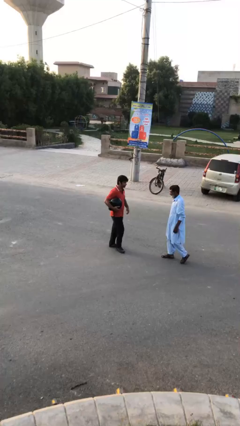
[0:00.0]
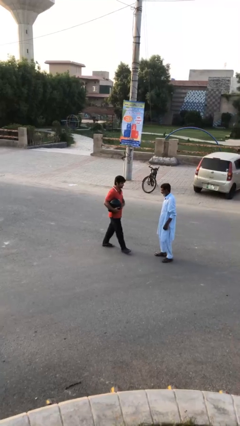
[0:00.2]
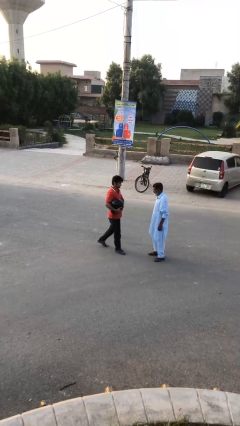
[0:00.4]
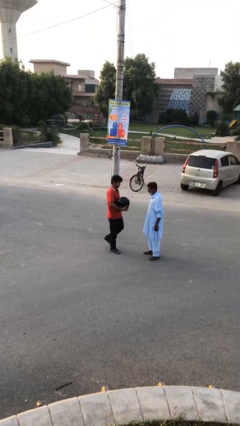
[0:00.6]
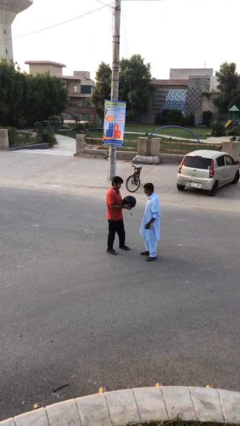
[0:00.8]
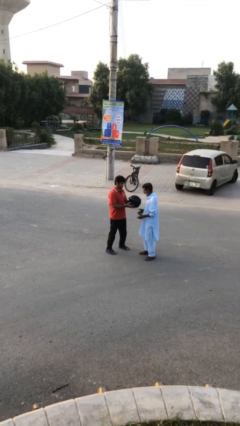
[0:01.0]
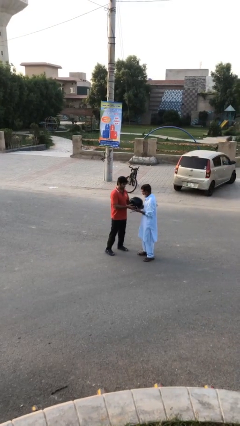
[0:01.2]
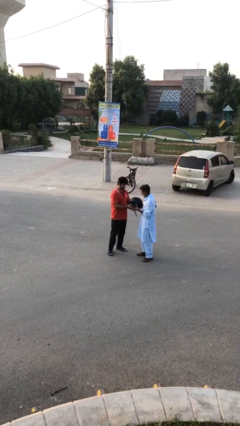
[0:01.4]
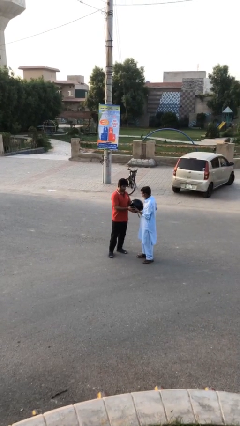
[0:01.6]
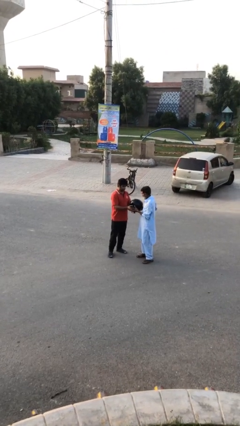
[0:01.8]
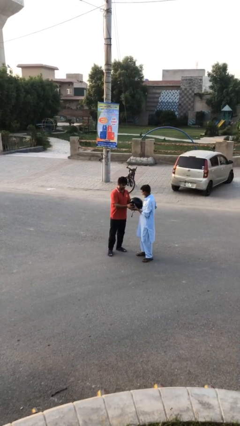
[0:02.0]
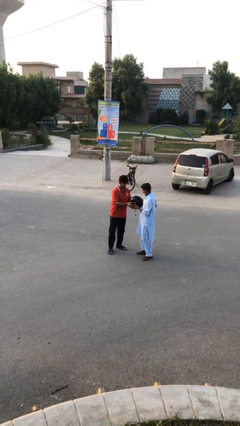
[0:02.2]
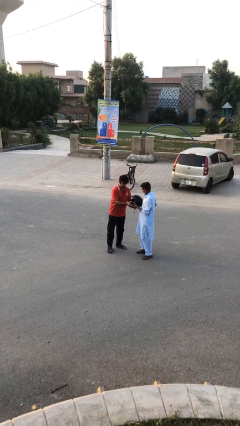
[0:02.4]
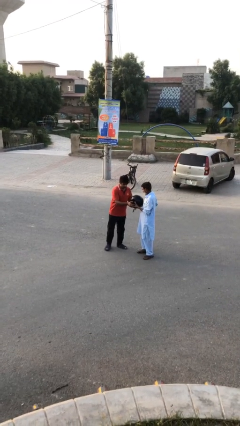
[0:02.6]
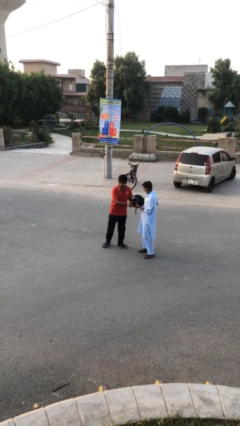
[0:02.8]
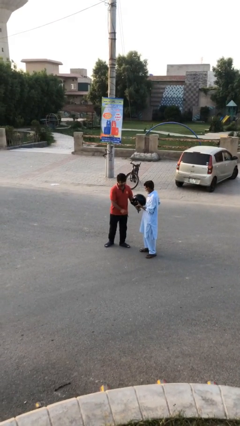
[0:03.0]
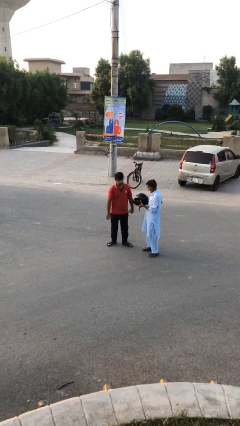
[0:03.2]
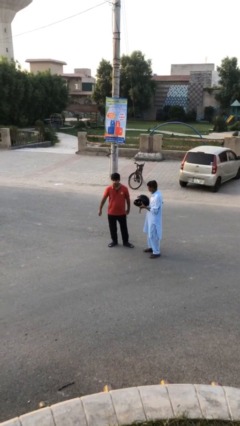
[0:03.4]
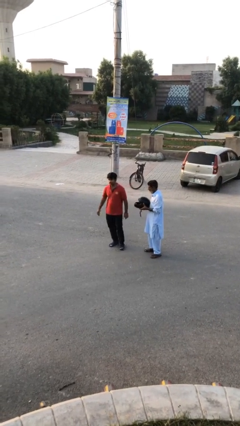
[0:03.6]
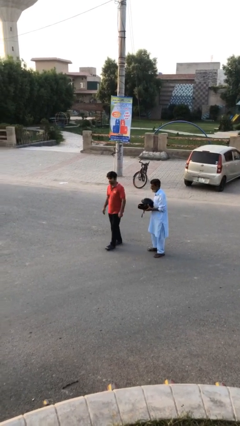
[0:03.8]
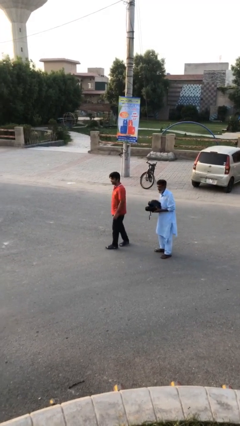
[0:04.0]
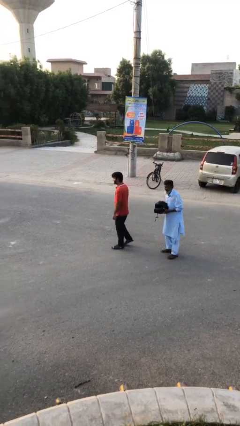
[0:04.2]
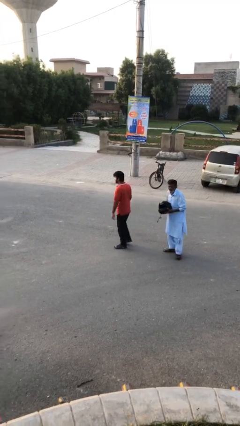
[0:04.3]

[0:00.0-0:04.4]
person transfers object to person

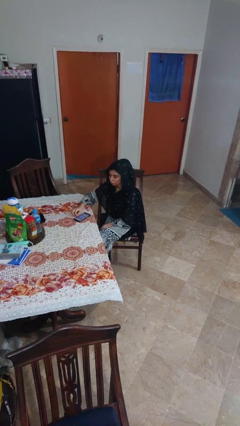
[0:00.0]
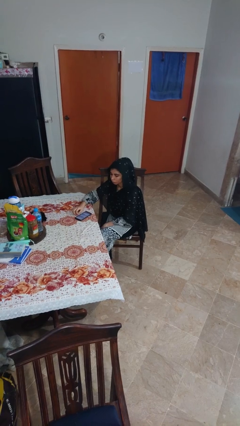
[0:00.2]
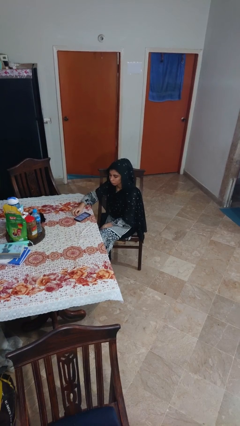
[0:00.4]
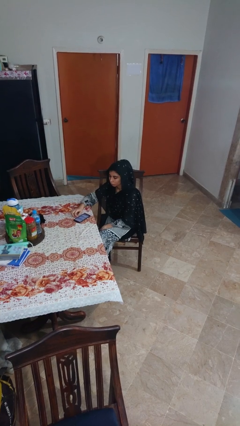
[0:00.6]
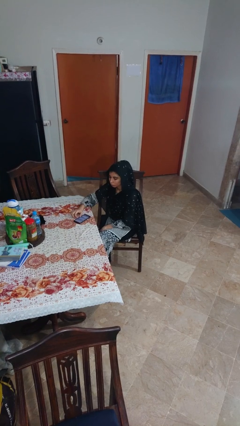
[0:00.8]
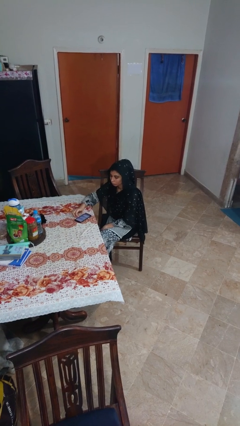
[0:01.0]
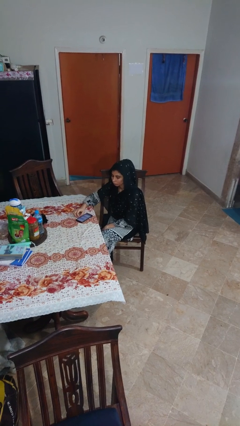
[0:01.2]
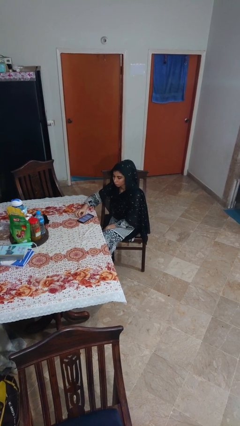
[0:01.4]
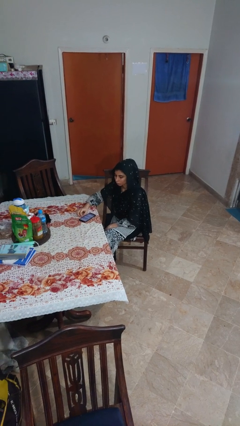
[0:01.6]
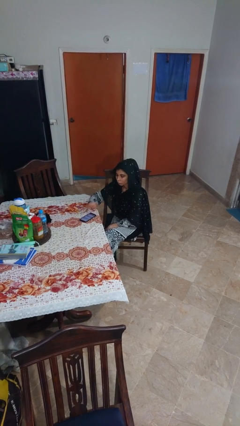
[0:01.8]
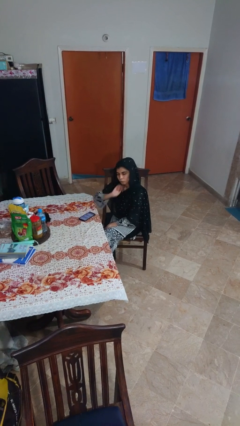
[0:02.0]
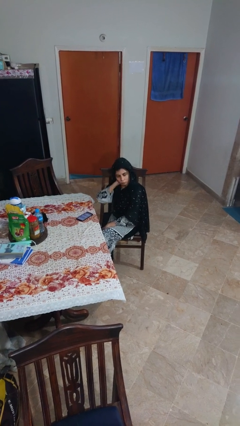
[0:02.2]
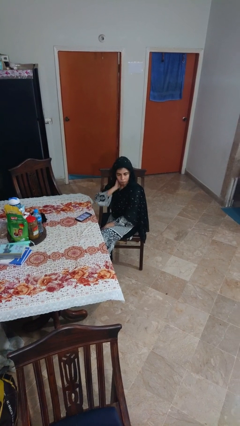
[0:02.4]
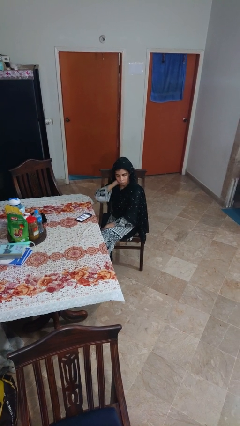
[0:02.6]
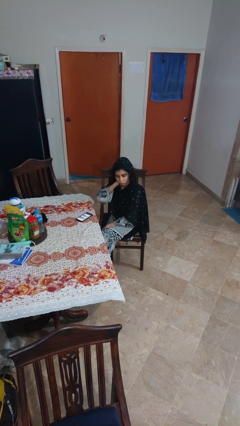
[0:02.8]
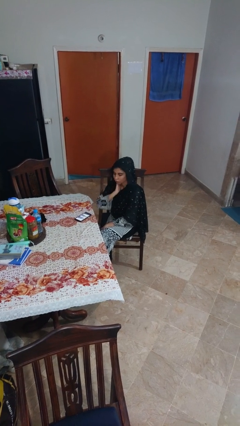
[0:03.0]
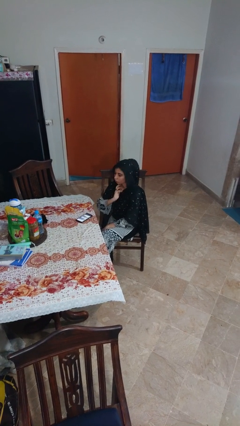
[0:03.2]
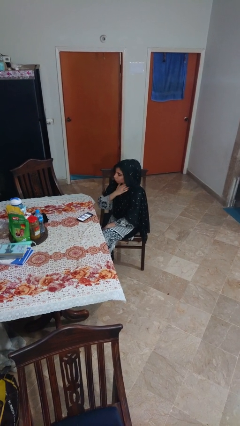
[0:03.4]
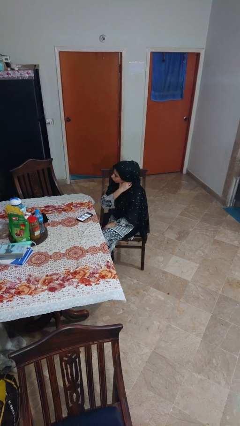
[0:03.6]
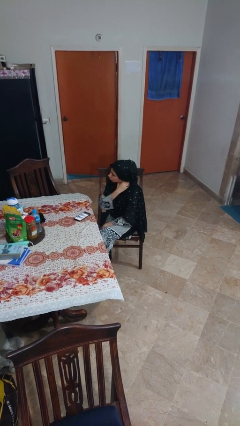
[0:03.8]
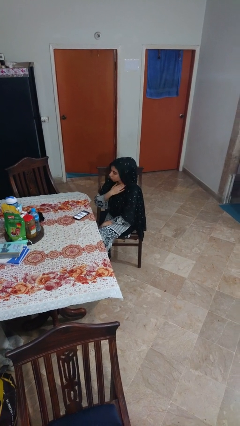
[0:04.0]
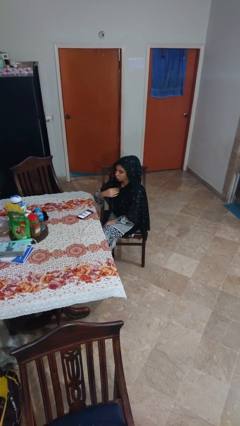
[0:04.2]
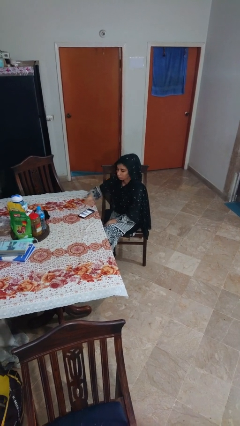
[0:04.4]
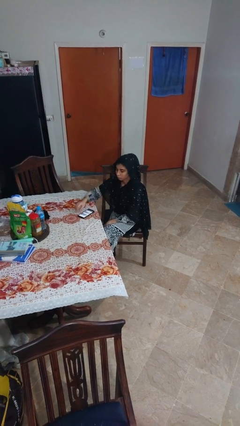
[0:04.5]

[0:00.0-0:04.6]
person rubs neck

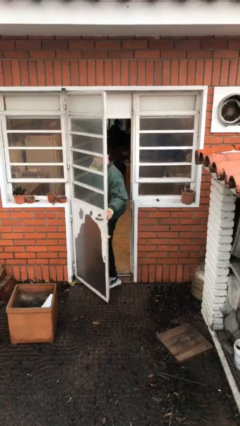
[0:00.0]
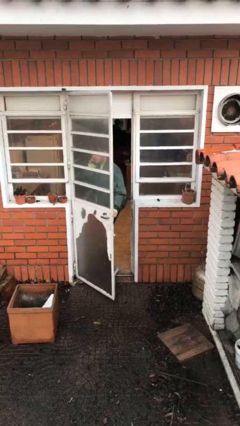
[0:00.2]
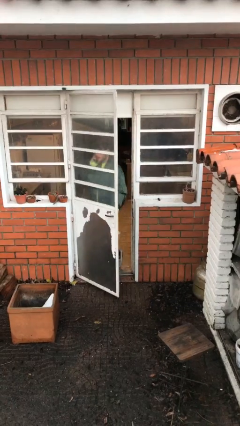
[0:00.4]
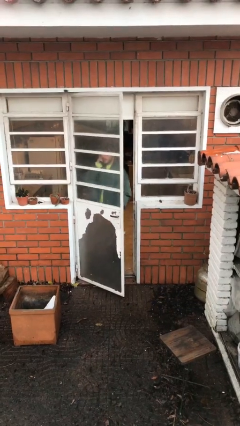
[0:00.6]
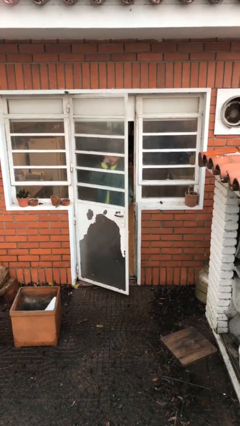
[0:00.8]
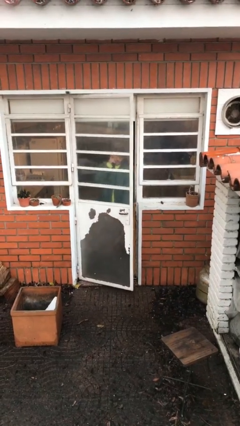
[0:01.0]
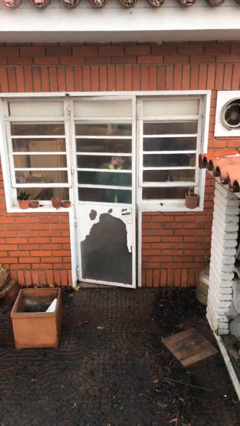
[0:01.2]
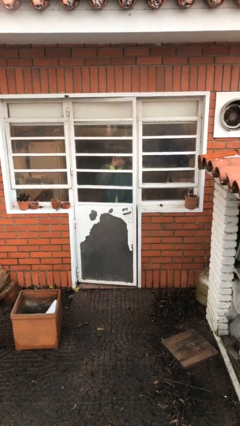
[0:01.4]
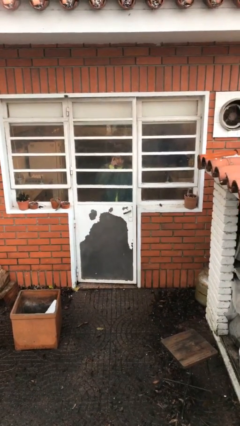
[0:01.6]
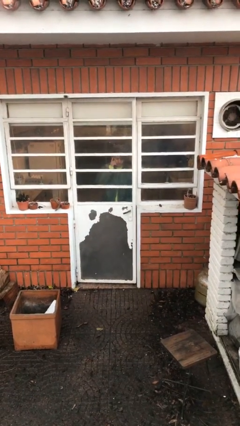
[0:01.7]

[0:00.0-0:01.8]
person closes facility door

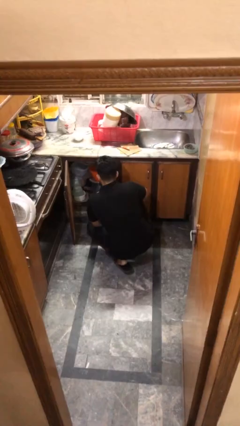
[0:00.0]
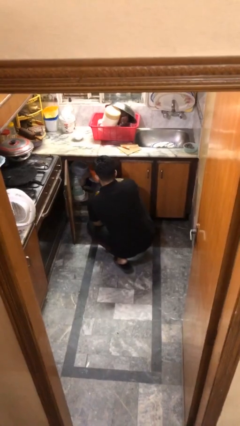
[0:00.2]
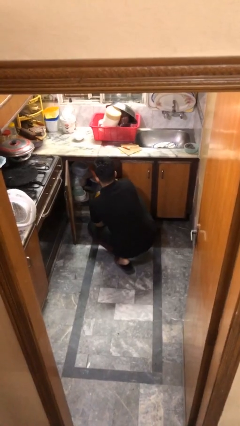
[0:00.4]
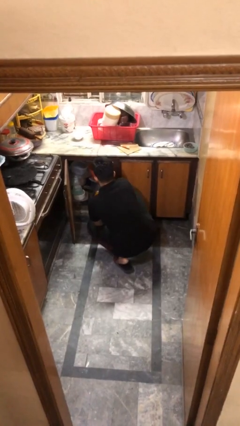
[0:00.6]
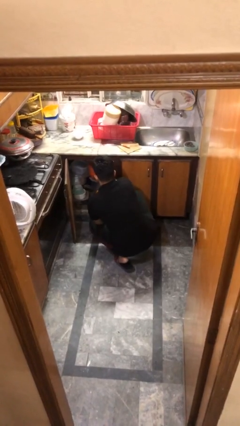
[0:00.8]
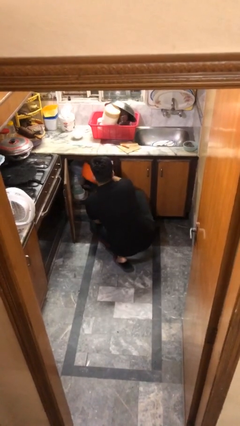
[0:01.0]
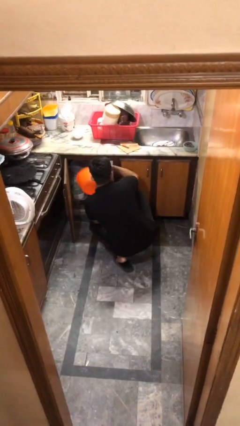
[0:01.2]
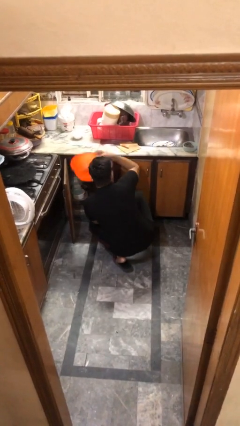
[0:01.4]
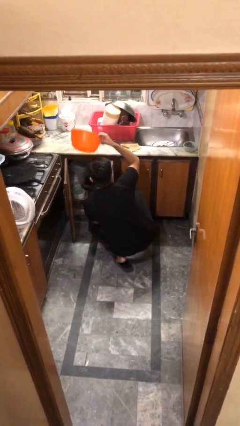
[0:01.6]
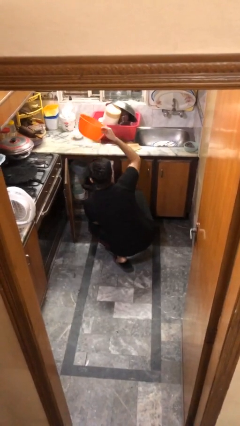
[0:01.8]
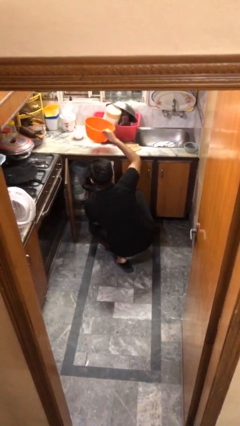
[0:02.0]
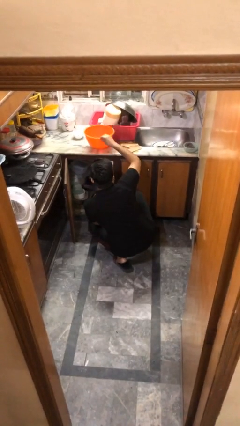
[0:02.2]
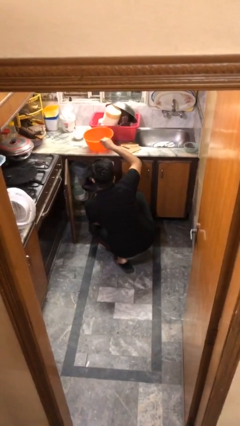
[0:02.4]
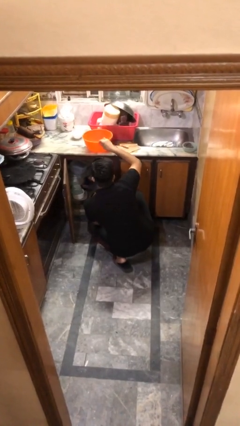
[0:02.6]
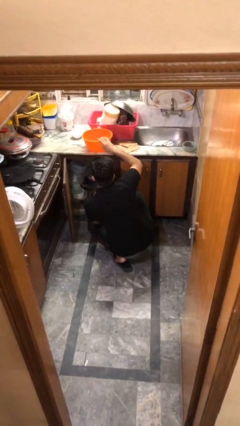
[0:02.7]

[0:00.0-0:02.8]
person takes object from kitchen drawer

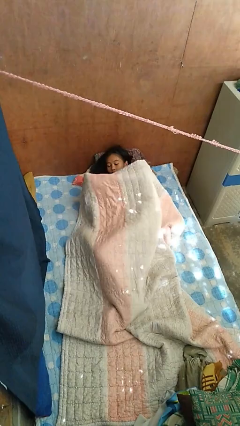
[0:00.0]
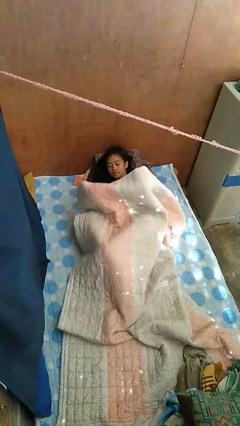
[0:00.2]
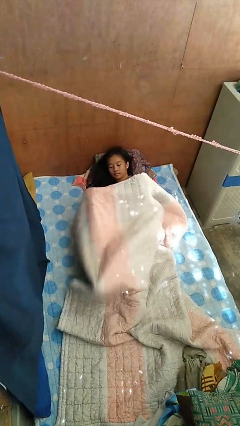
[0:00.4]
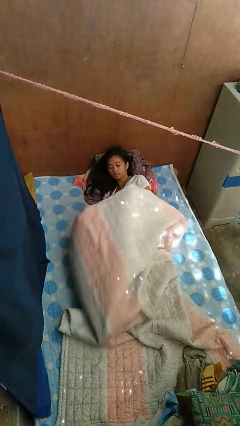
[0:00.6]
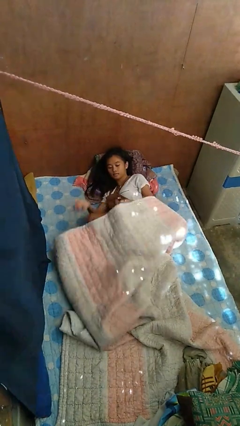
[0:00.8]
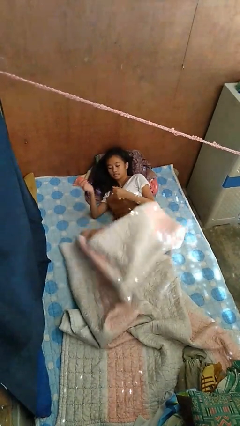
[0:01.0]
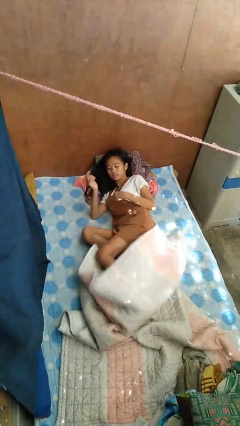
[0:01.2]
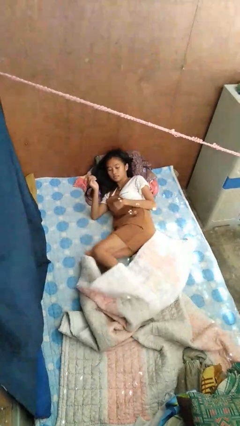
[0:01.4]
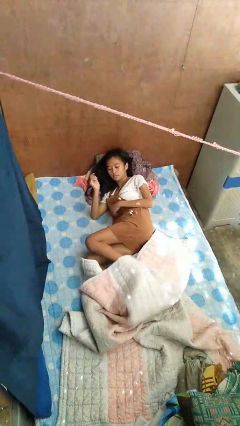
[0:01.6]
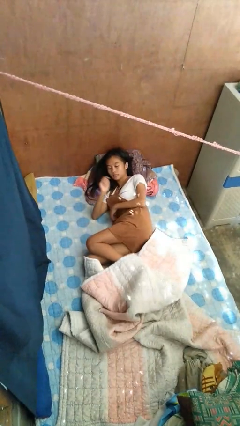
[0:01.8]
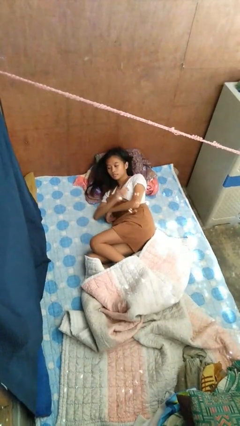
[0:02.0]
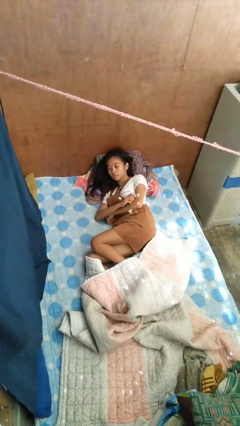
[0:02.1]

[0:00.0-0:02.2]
person uncovers with bedsheets

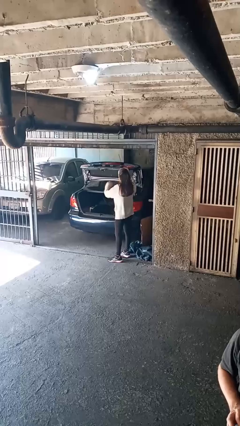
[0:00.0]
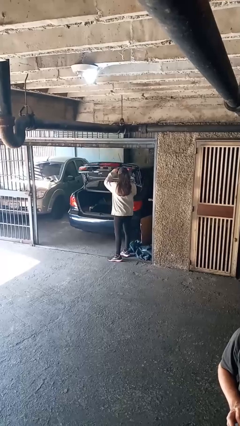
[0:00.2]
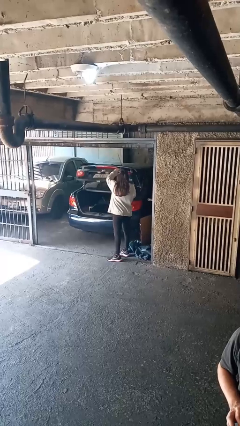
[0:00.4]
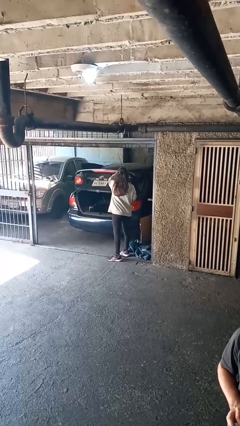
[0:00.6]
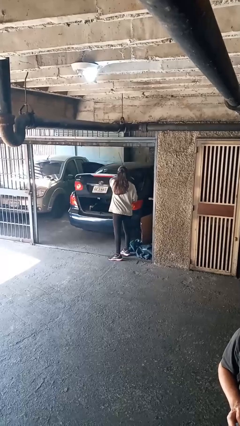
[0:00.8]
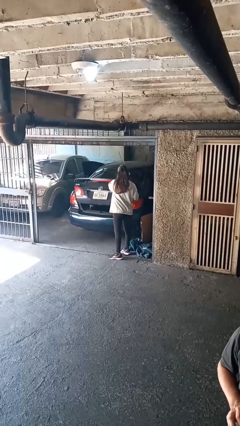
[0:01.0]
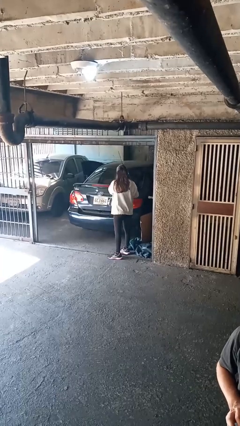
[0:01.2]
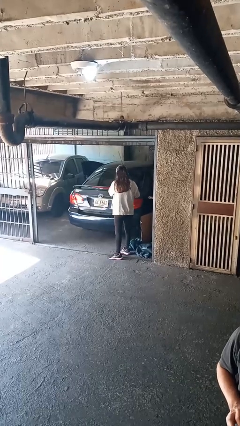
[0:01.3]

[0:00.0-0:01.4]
person closes car trunk

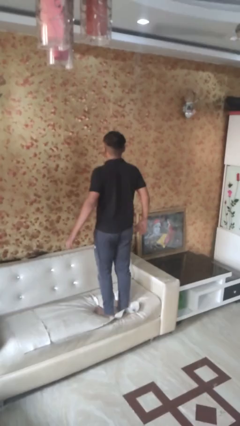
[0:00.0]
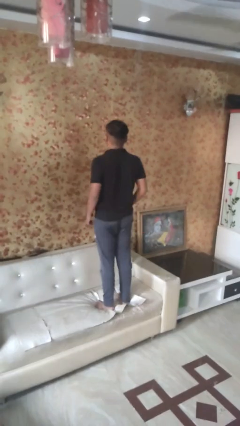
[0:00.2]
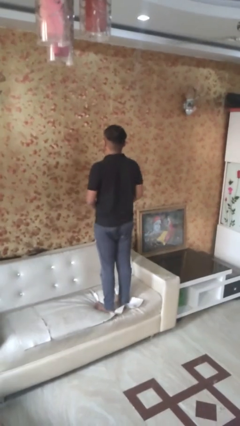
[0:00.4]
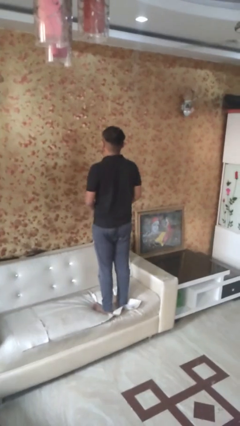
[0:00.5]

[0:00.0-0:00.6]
person jumps on bed
